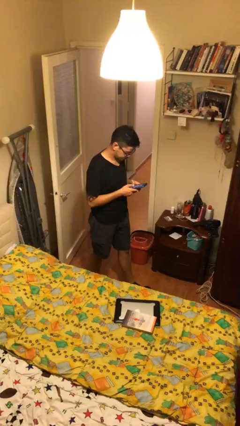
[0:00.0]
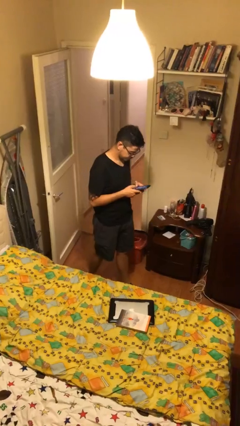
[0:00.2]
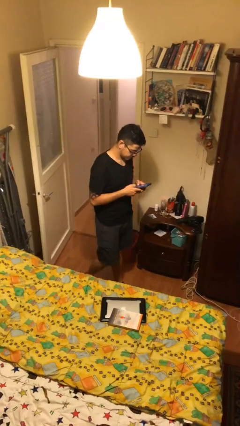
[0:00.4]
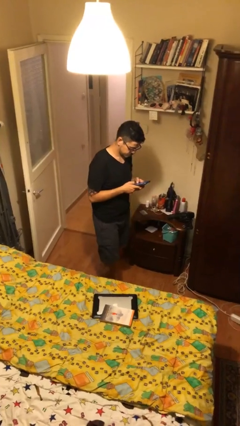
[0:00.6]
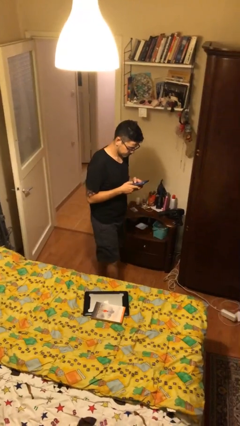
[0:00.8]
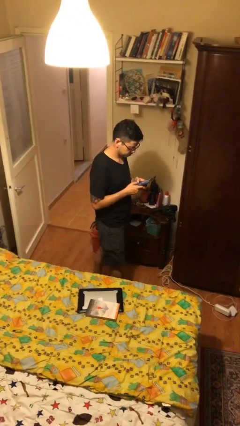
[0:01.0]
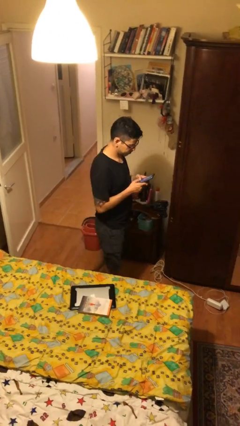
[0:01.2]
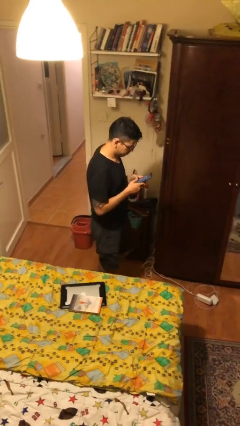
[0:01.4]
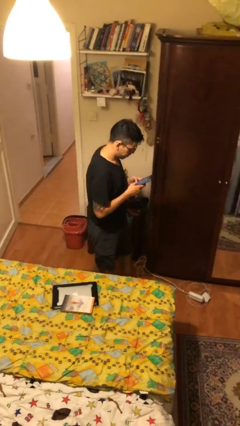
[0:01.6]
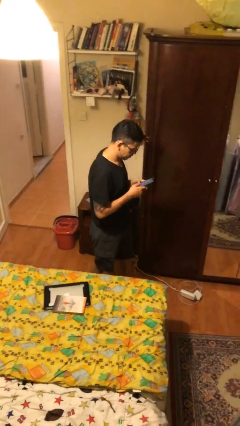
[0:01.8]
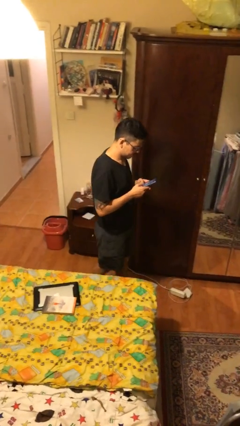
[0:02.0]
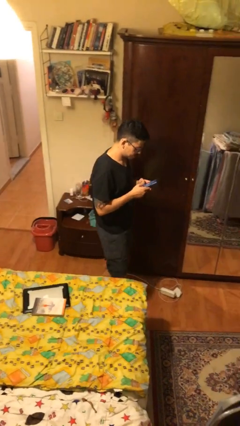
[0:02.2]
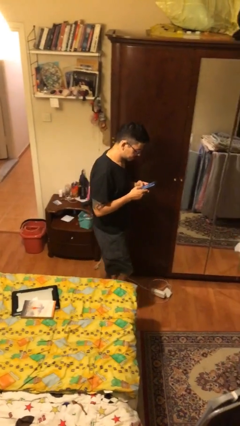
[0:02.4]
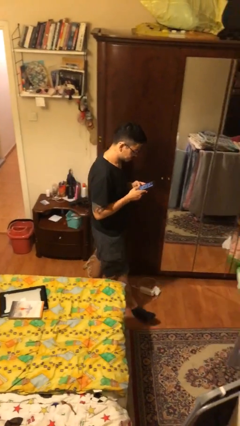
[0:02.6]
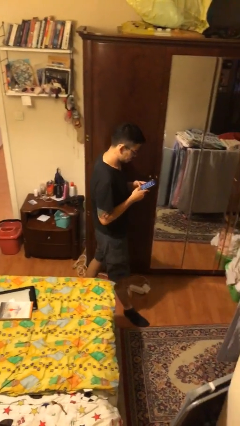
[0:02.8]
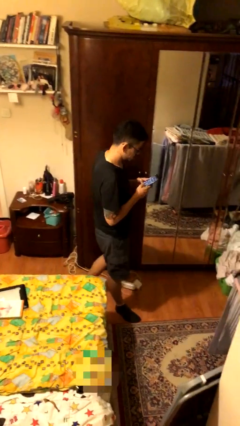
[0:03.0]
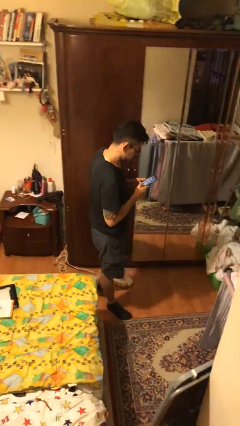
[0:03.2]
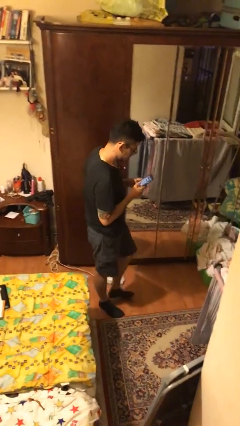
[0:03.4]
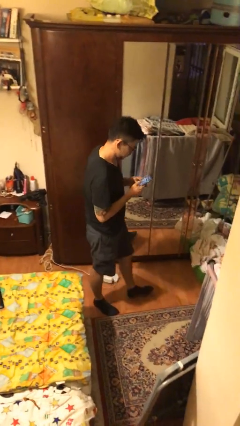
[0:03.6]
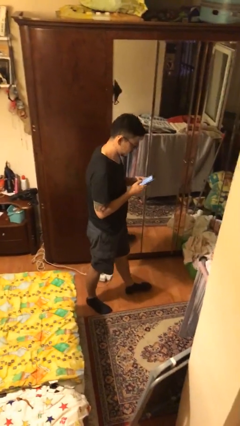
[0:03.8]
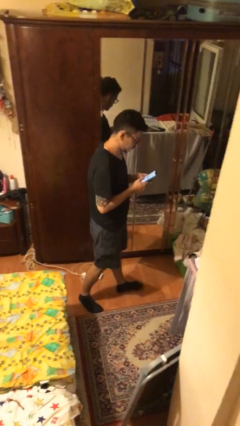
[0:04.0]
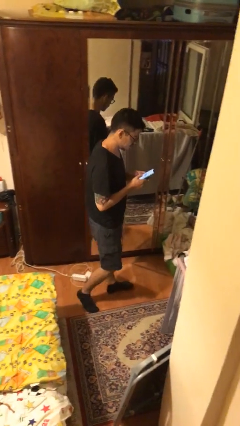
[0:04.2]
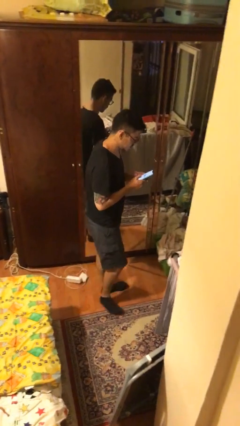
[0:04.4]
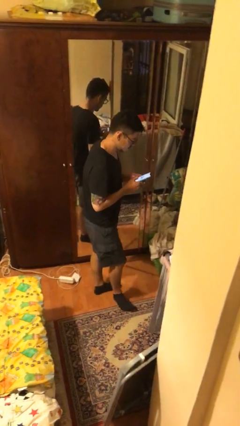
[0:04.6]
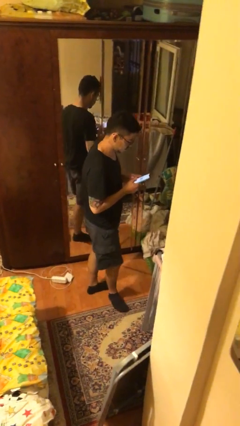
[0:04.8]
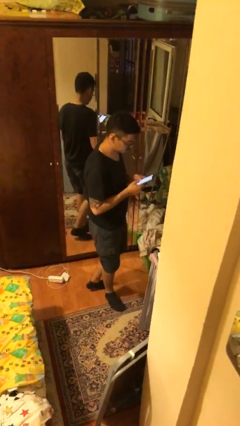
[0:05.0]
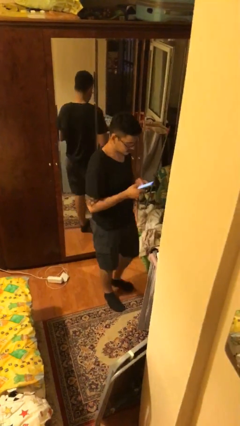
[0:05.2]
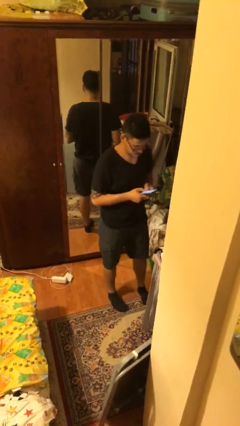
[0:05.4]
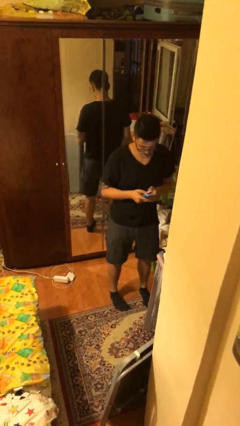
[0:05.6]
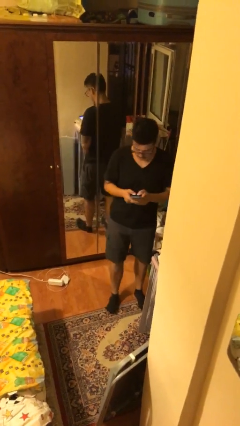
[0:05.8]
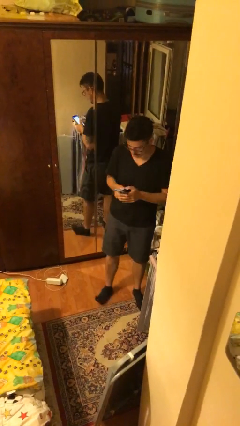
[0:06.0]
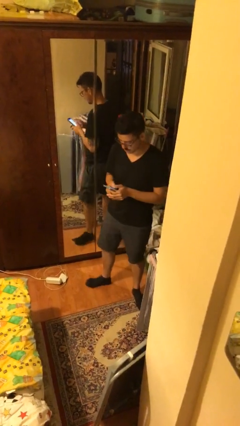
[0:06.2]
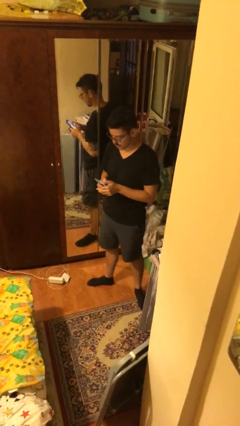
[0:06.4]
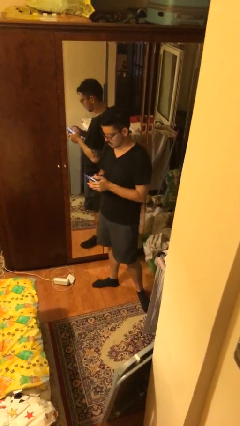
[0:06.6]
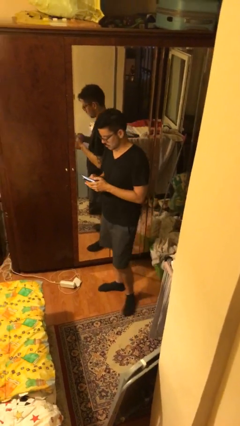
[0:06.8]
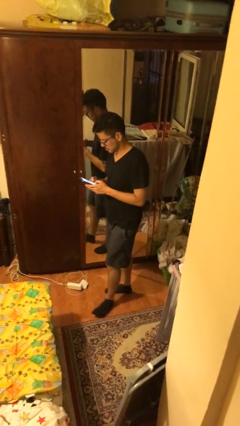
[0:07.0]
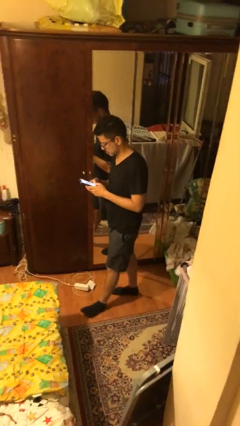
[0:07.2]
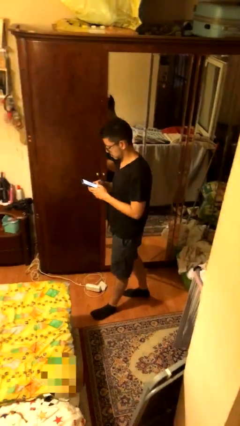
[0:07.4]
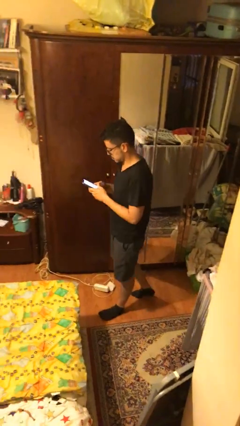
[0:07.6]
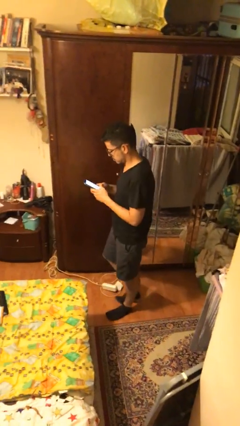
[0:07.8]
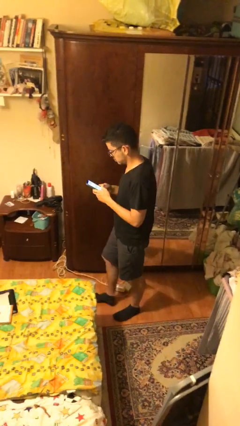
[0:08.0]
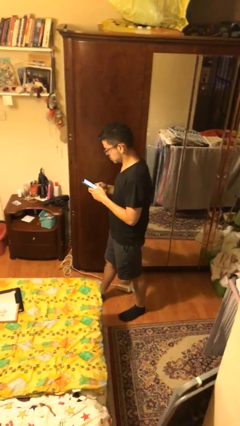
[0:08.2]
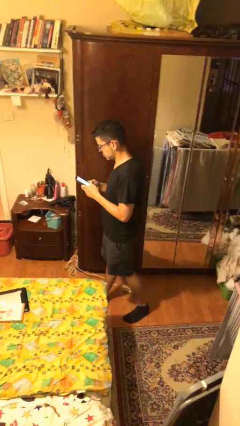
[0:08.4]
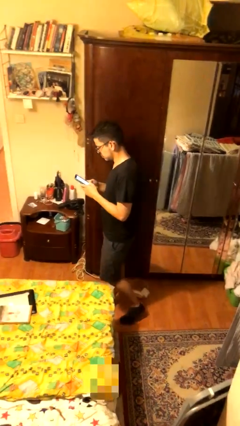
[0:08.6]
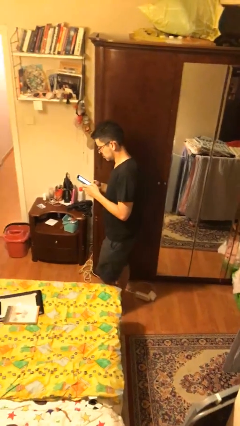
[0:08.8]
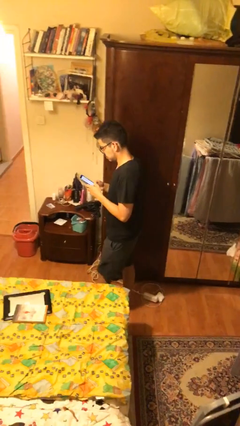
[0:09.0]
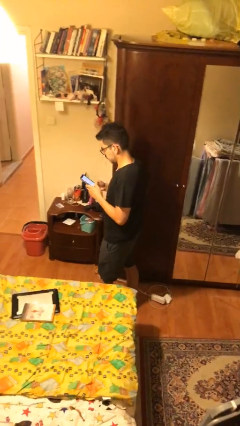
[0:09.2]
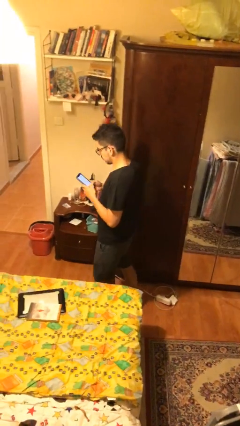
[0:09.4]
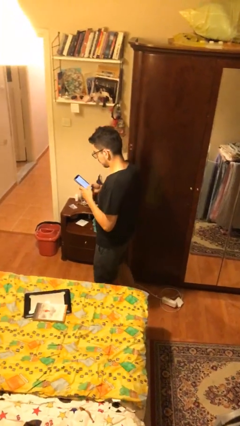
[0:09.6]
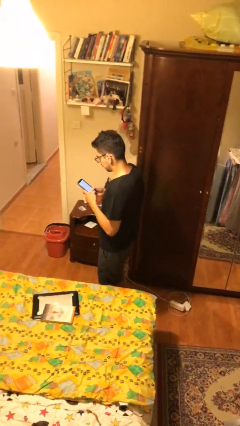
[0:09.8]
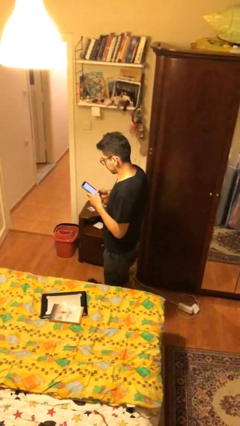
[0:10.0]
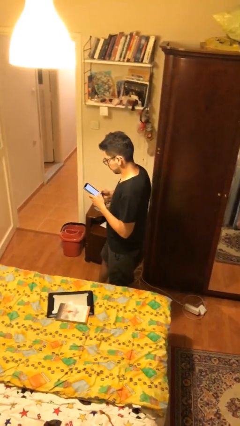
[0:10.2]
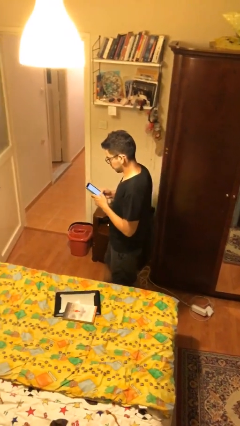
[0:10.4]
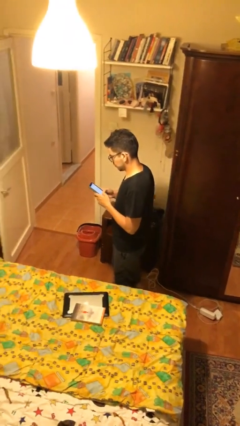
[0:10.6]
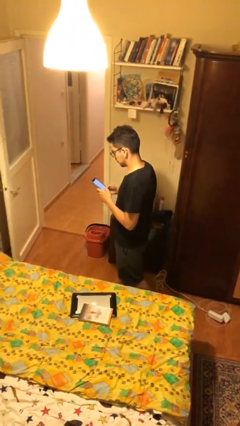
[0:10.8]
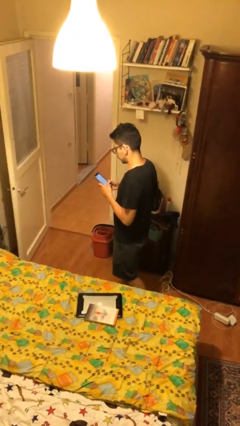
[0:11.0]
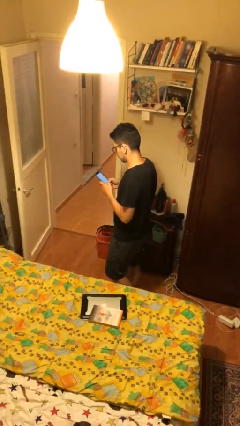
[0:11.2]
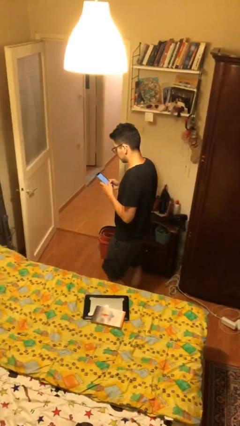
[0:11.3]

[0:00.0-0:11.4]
person texts on phone

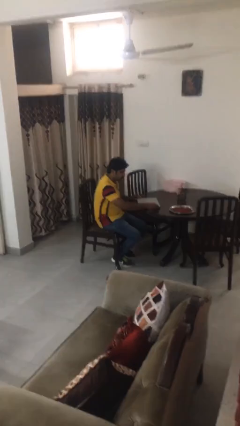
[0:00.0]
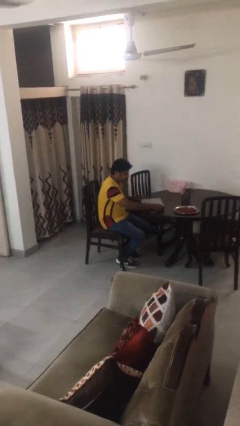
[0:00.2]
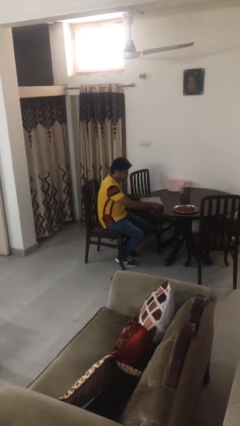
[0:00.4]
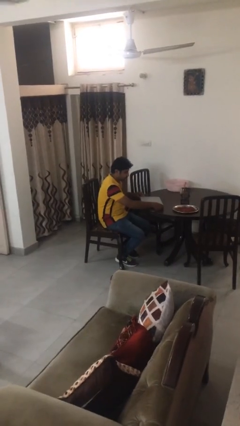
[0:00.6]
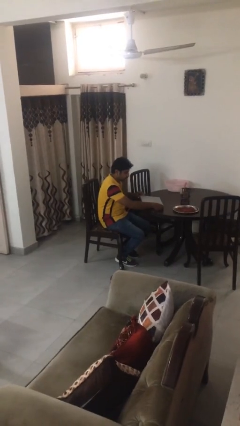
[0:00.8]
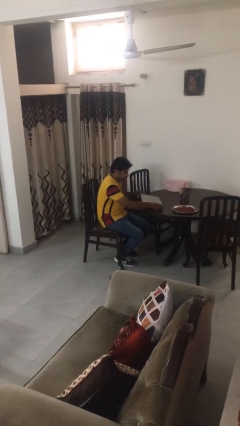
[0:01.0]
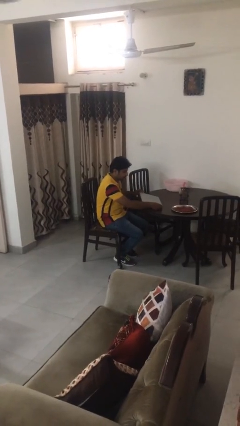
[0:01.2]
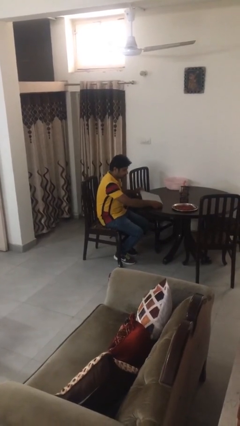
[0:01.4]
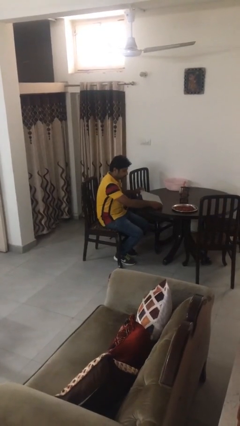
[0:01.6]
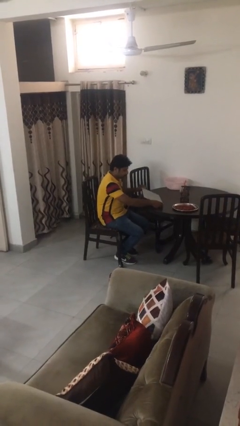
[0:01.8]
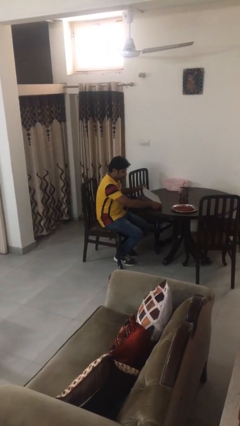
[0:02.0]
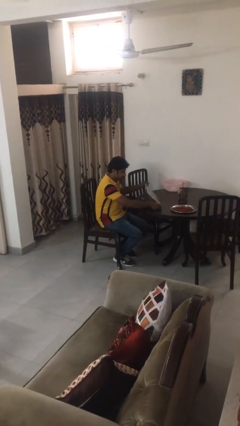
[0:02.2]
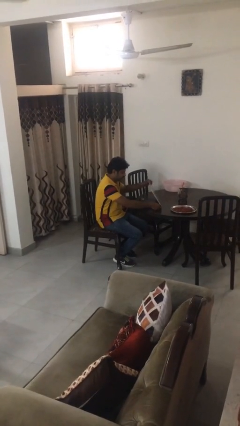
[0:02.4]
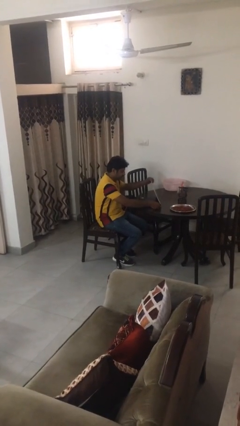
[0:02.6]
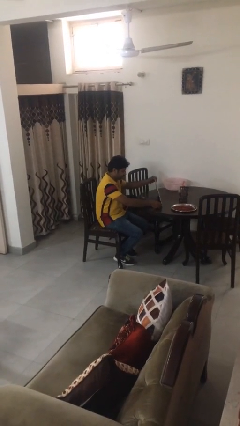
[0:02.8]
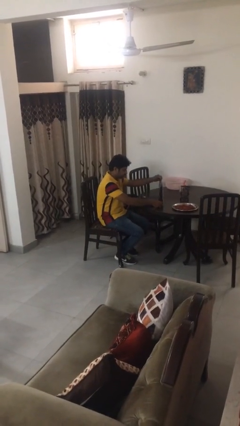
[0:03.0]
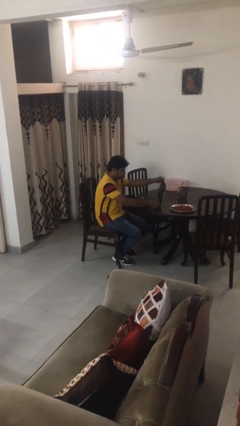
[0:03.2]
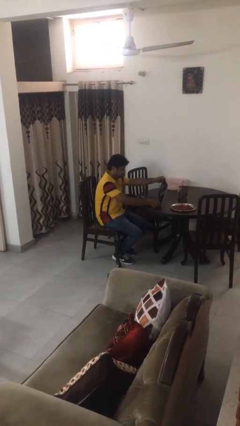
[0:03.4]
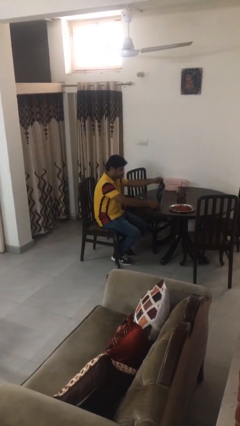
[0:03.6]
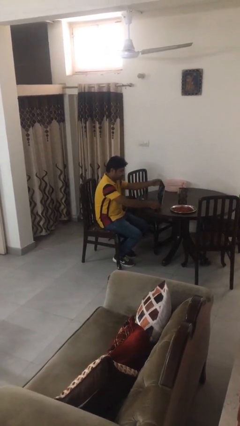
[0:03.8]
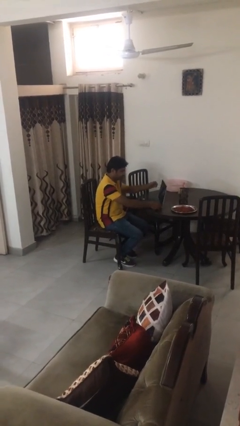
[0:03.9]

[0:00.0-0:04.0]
person opens laptop

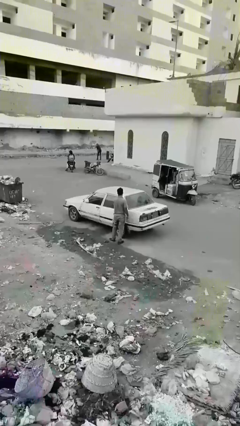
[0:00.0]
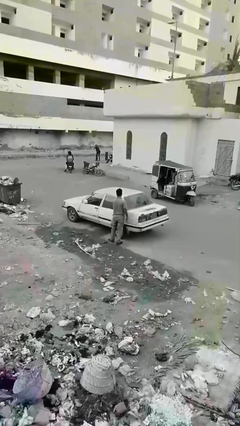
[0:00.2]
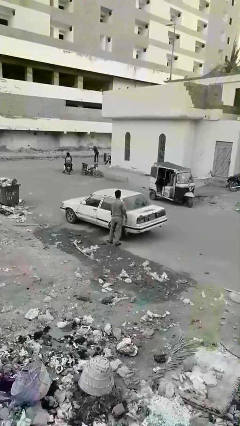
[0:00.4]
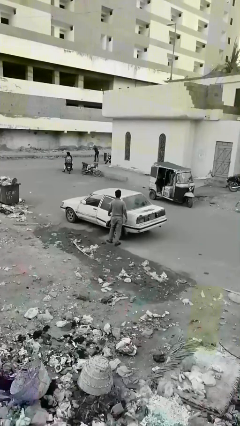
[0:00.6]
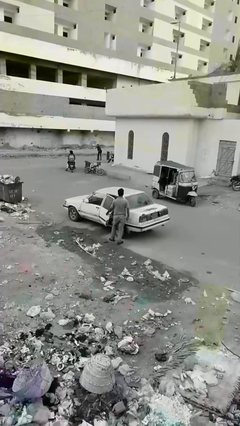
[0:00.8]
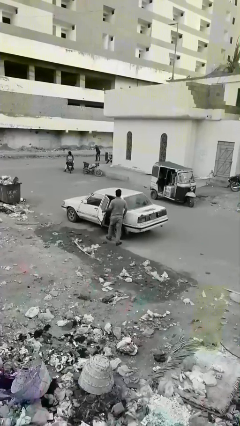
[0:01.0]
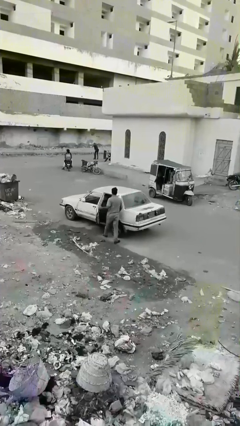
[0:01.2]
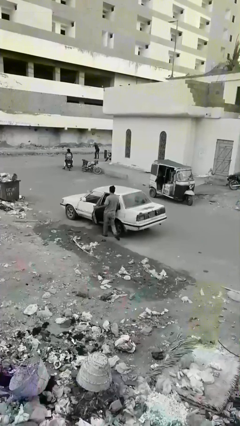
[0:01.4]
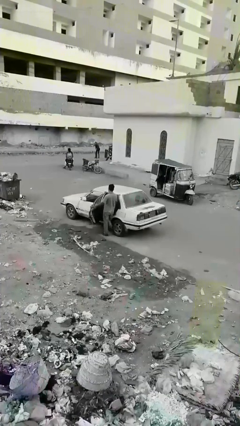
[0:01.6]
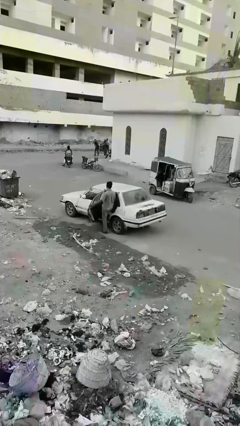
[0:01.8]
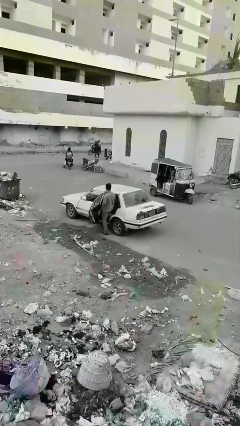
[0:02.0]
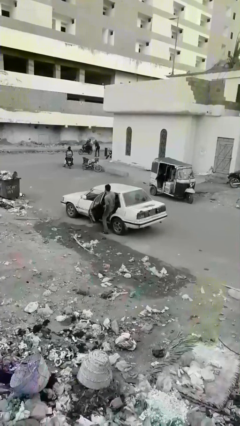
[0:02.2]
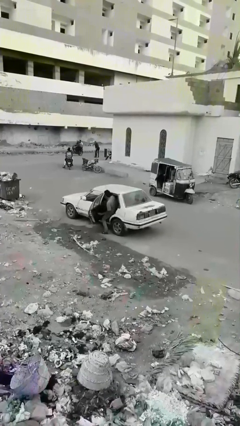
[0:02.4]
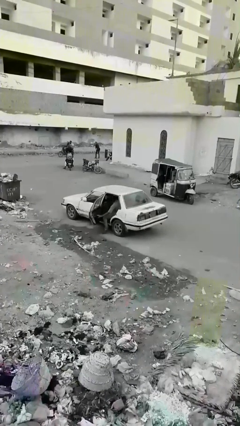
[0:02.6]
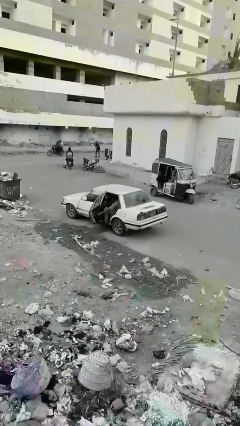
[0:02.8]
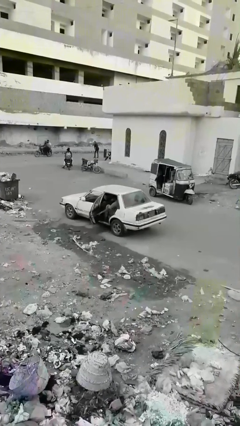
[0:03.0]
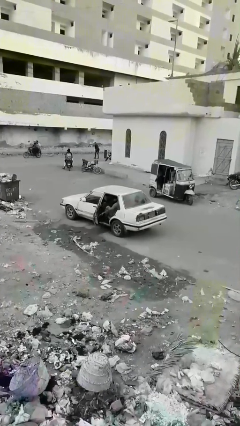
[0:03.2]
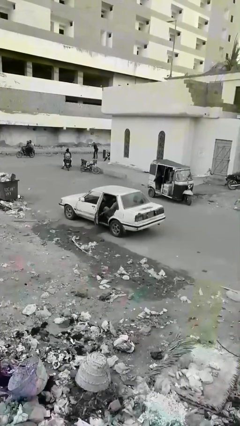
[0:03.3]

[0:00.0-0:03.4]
car picks up person
